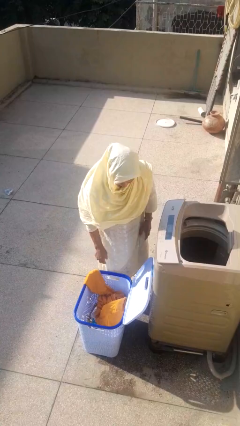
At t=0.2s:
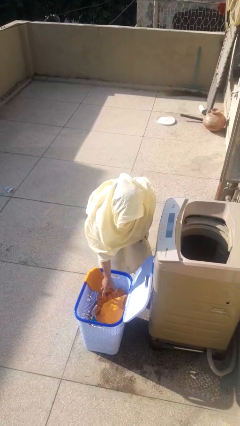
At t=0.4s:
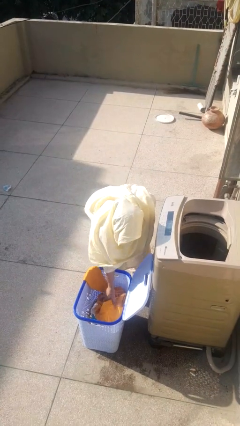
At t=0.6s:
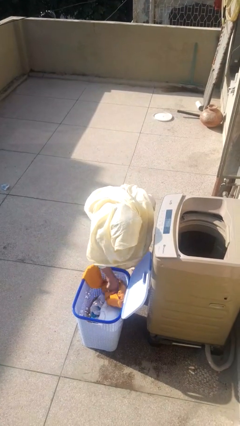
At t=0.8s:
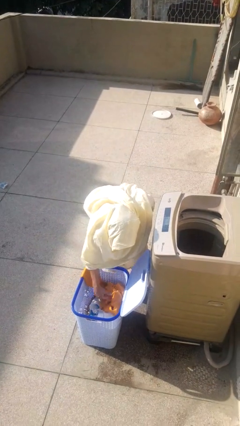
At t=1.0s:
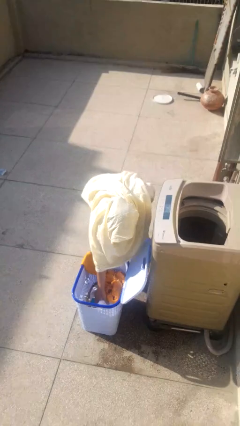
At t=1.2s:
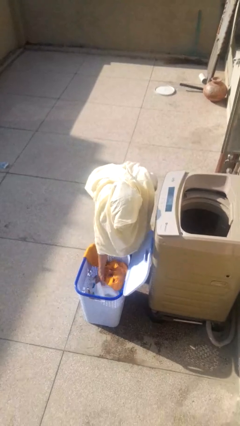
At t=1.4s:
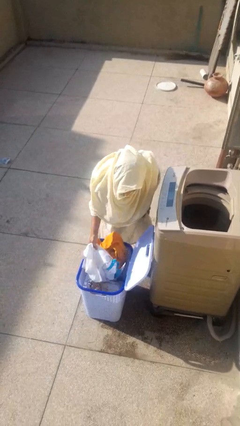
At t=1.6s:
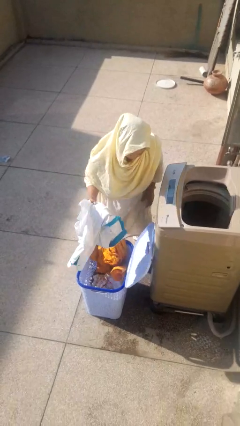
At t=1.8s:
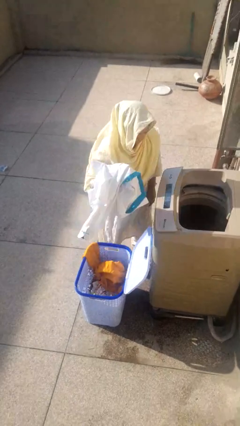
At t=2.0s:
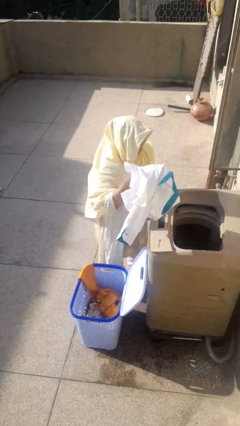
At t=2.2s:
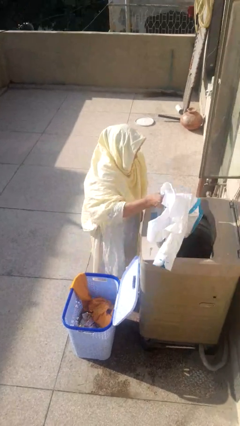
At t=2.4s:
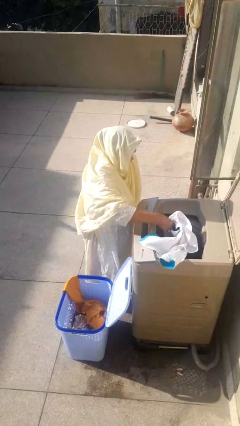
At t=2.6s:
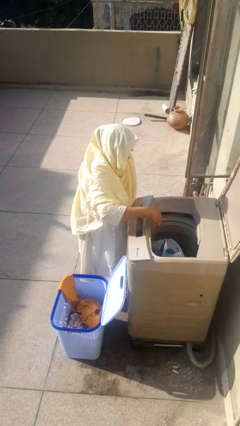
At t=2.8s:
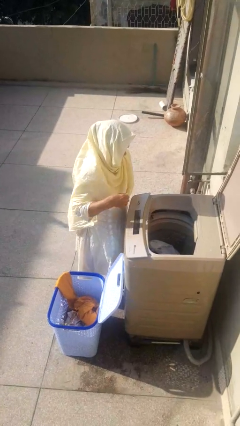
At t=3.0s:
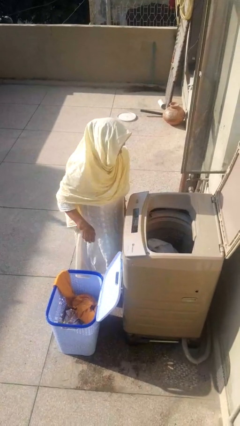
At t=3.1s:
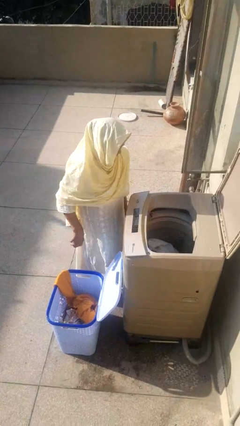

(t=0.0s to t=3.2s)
person loads clotheswasher

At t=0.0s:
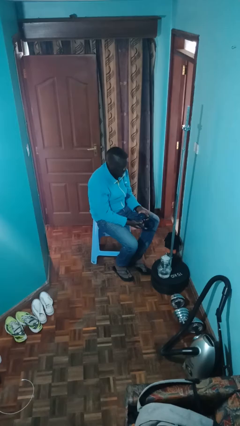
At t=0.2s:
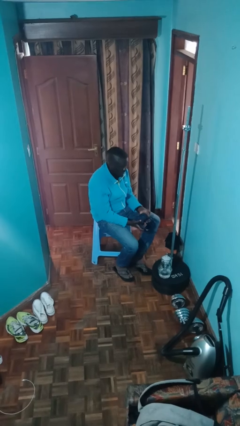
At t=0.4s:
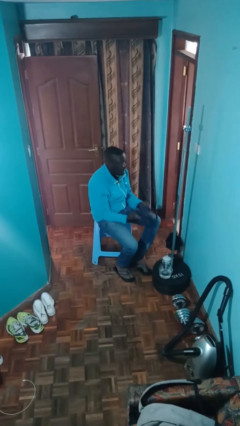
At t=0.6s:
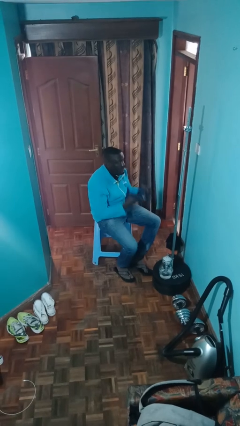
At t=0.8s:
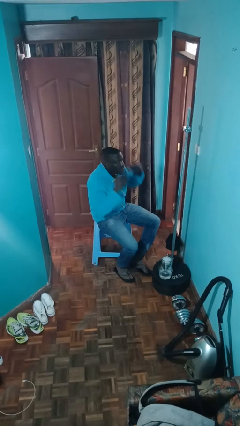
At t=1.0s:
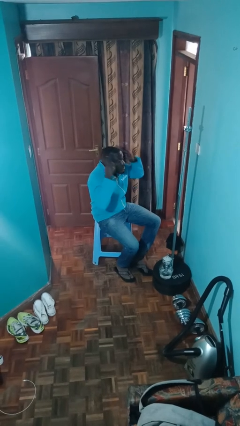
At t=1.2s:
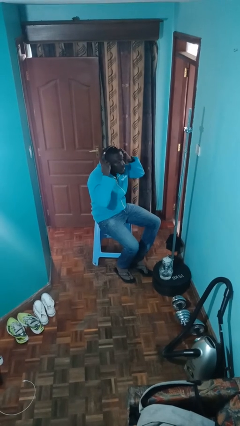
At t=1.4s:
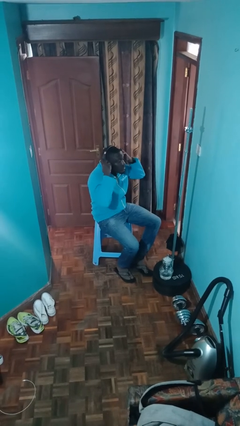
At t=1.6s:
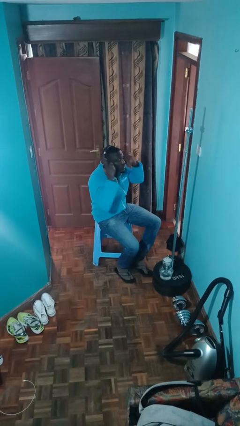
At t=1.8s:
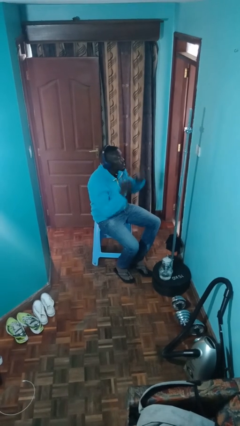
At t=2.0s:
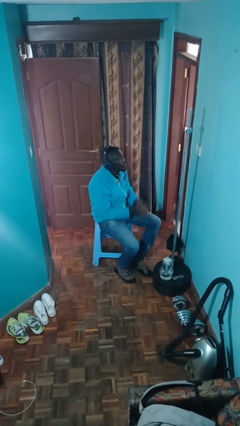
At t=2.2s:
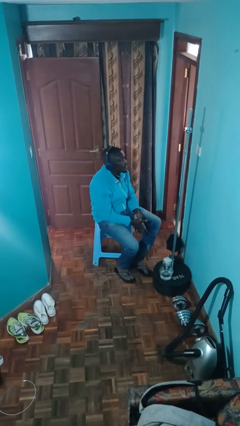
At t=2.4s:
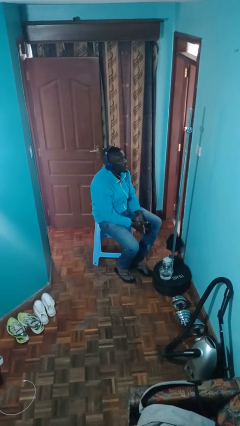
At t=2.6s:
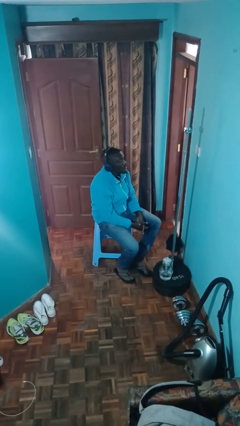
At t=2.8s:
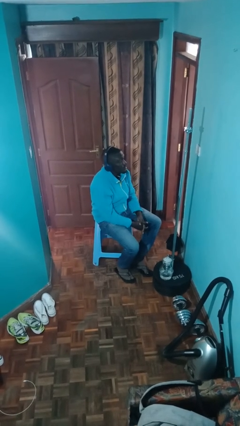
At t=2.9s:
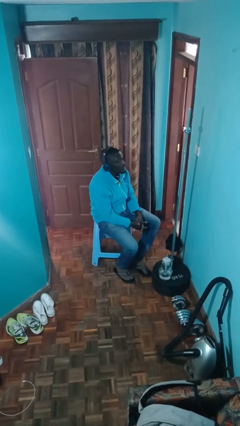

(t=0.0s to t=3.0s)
person puts on headphones

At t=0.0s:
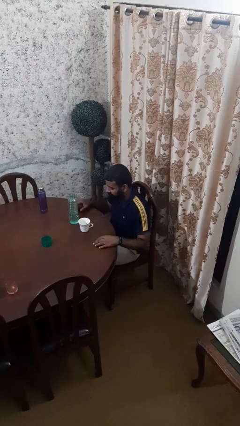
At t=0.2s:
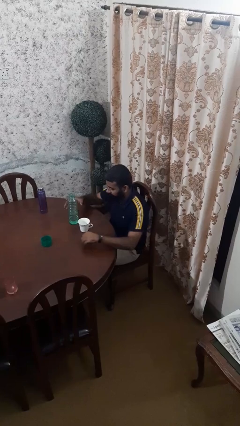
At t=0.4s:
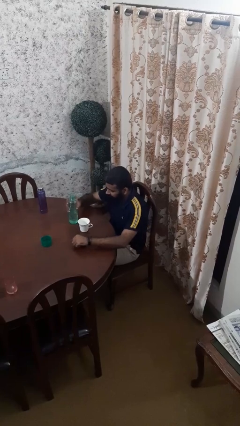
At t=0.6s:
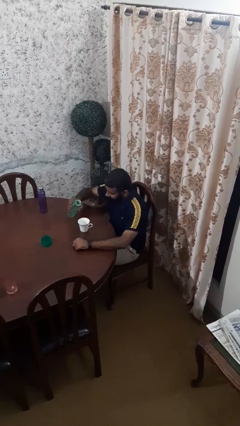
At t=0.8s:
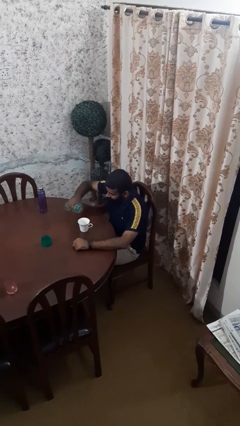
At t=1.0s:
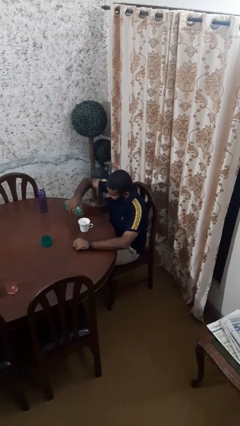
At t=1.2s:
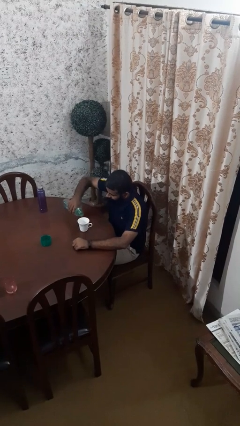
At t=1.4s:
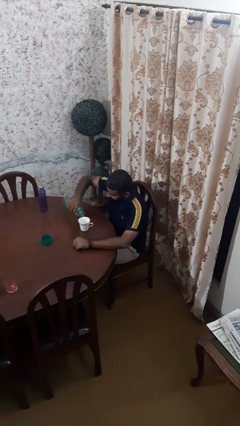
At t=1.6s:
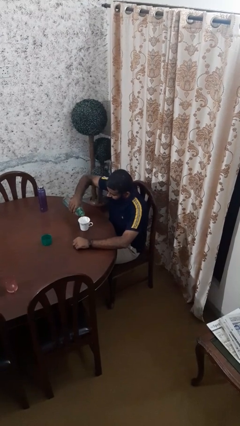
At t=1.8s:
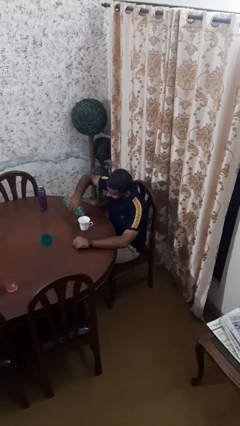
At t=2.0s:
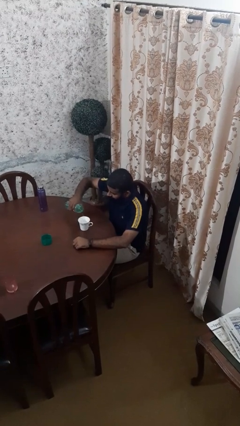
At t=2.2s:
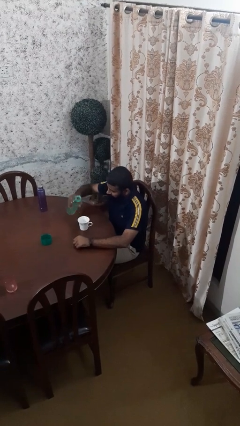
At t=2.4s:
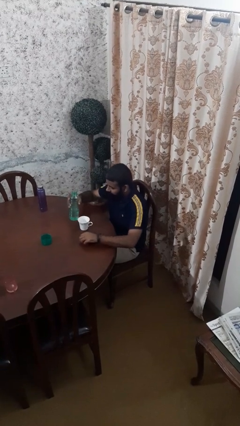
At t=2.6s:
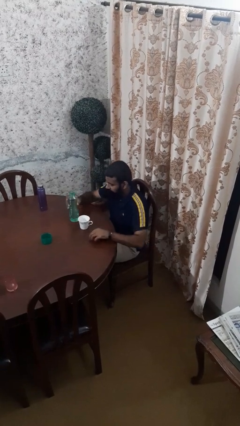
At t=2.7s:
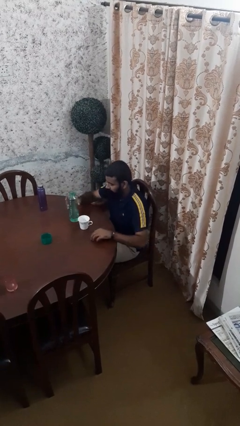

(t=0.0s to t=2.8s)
person pours liquid into cup

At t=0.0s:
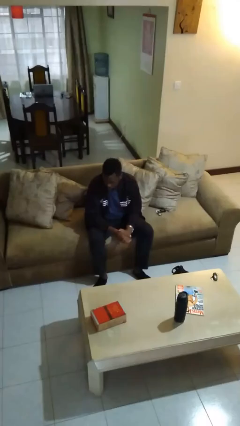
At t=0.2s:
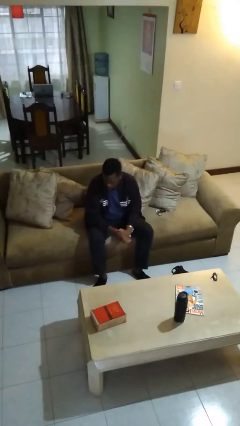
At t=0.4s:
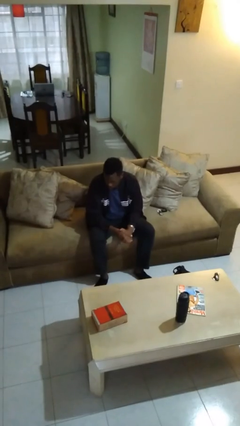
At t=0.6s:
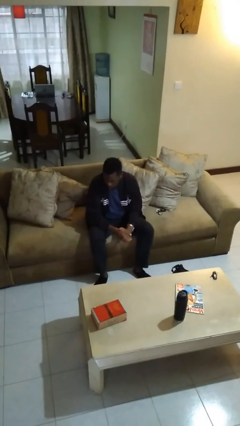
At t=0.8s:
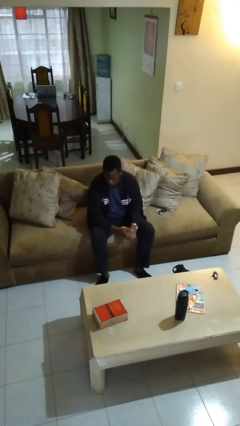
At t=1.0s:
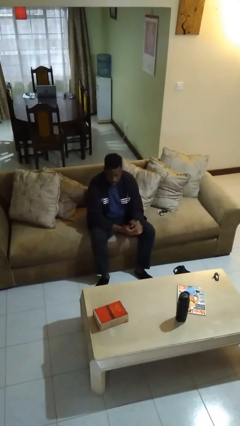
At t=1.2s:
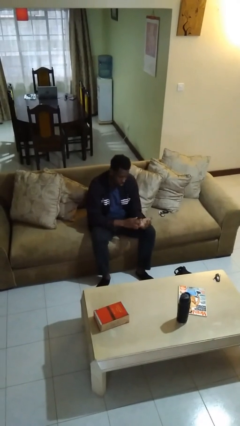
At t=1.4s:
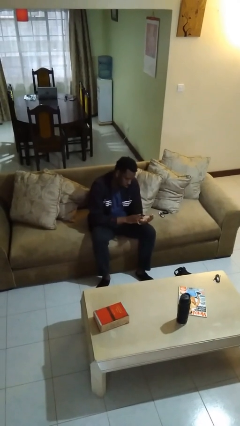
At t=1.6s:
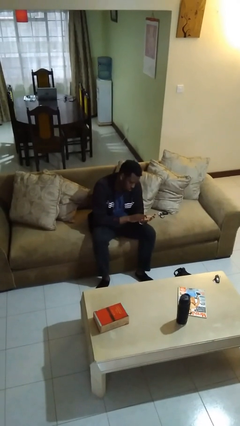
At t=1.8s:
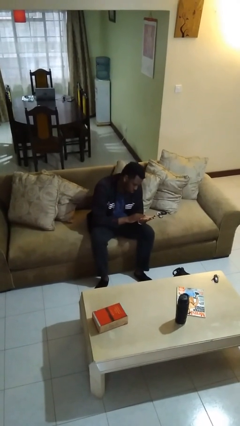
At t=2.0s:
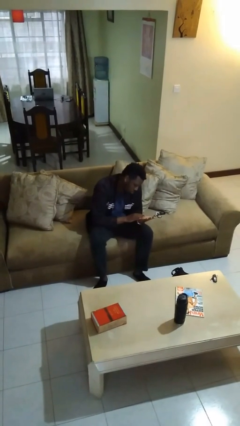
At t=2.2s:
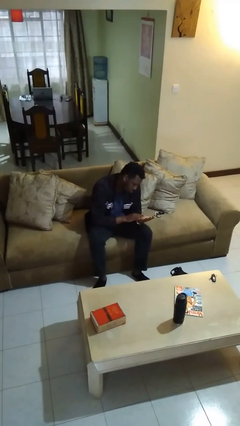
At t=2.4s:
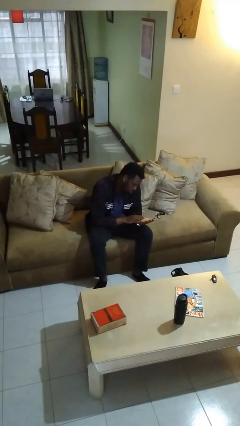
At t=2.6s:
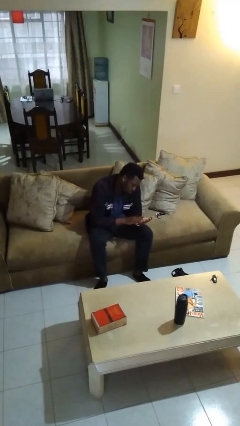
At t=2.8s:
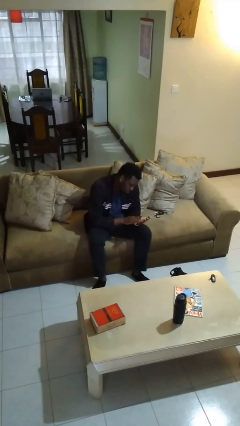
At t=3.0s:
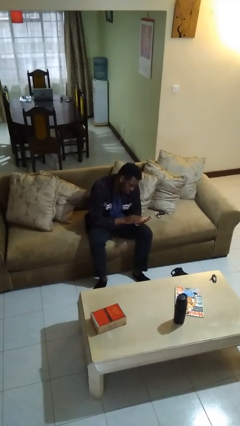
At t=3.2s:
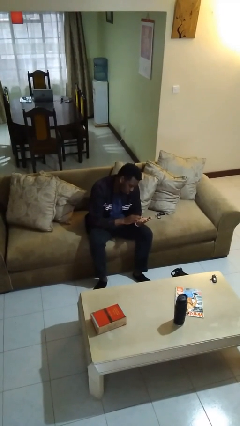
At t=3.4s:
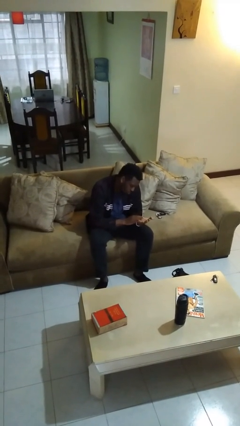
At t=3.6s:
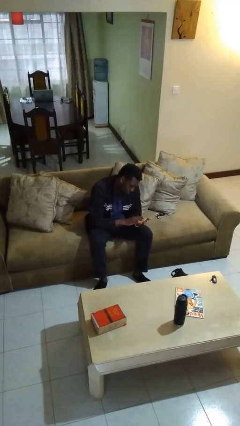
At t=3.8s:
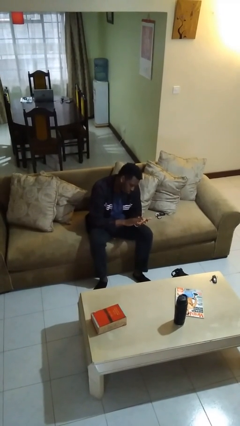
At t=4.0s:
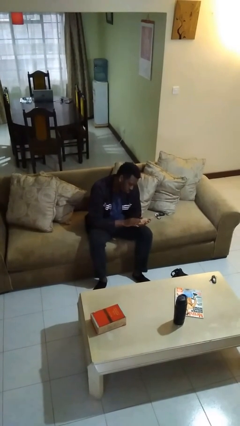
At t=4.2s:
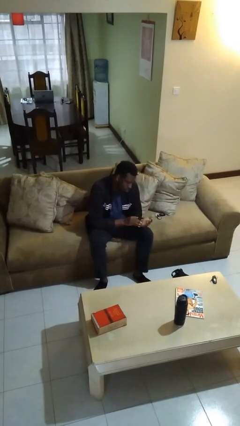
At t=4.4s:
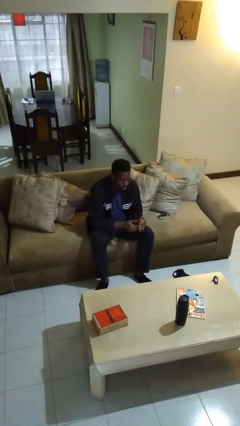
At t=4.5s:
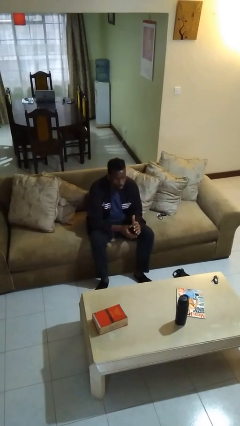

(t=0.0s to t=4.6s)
person looks at hands in lap

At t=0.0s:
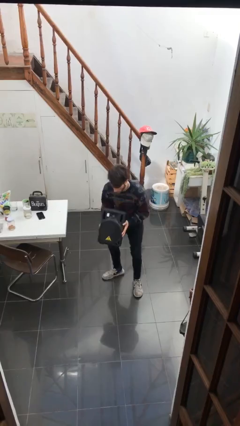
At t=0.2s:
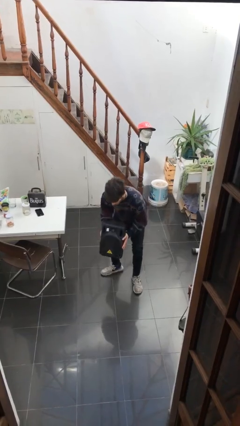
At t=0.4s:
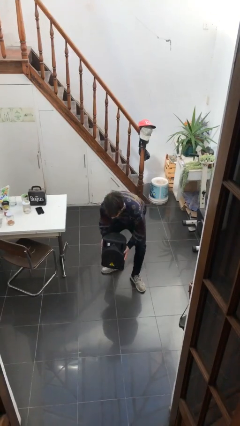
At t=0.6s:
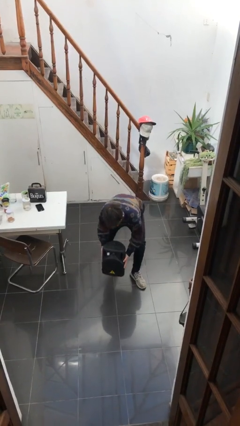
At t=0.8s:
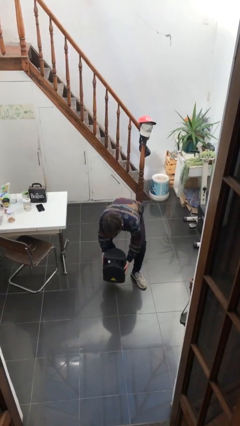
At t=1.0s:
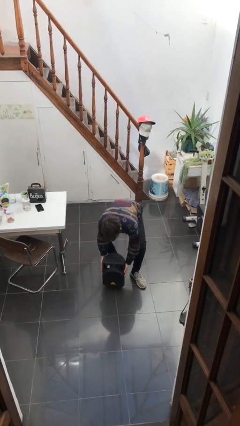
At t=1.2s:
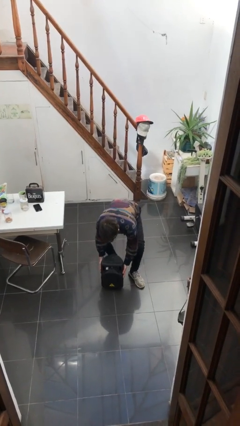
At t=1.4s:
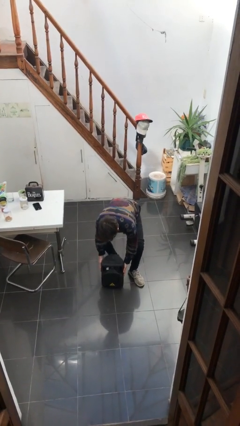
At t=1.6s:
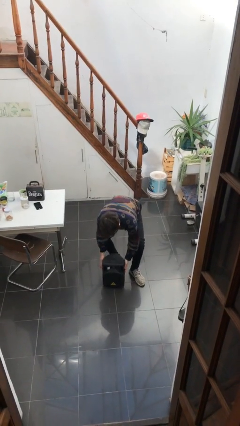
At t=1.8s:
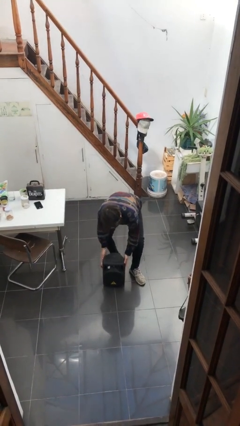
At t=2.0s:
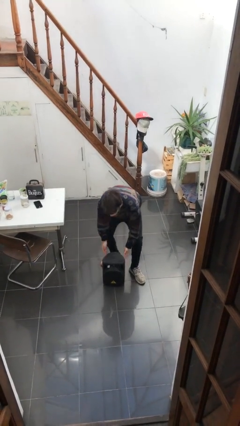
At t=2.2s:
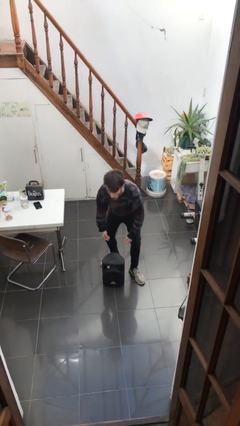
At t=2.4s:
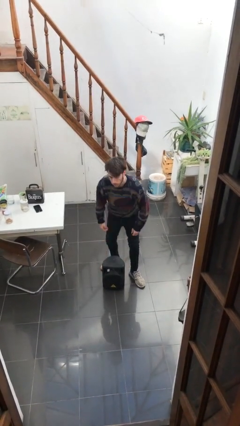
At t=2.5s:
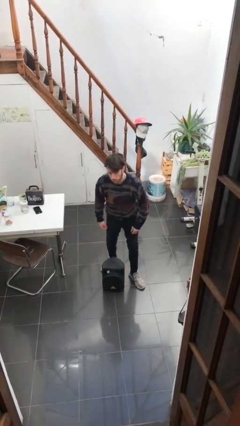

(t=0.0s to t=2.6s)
person puts down object on floor

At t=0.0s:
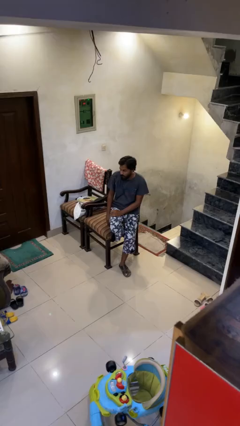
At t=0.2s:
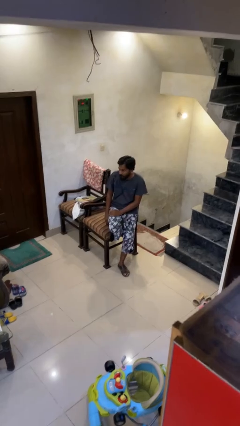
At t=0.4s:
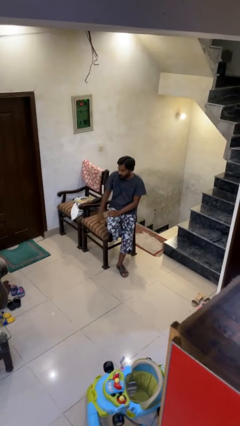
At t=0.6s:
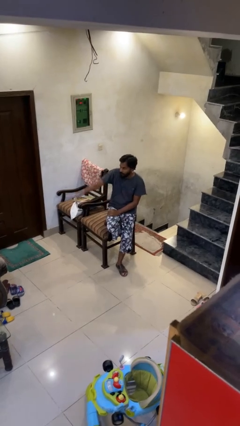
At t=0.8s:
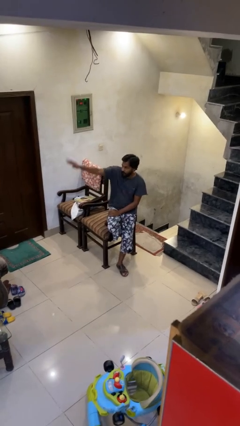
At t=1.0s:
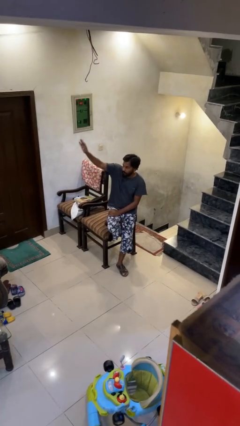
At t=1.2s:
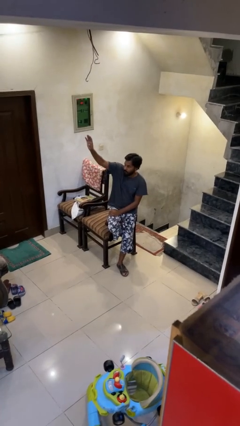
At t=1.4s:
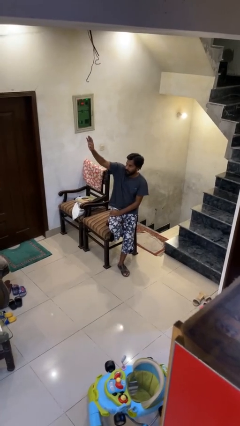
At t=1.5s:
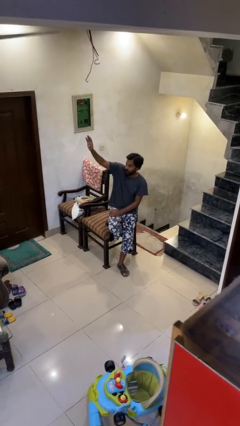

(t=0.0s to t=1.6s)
person gestures raise hand
